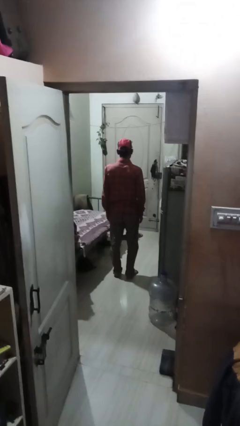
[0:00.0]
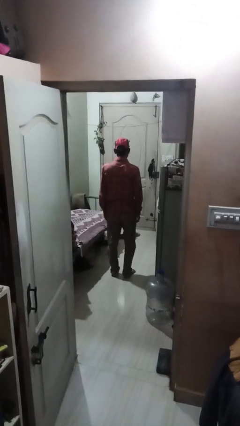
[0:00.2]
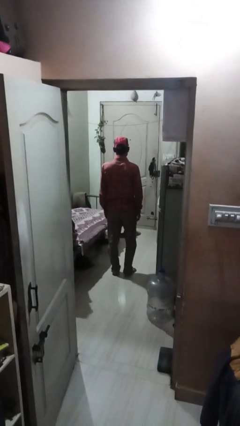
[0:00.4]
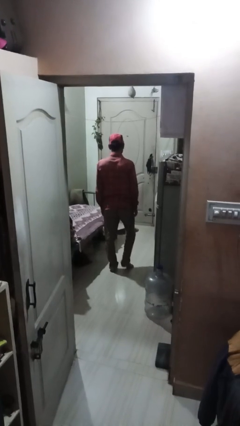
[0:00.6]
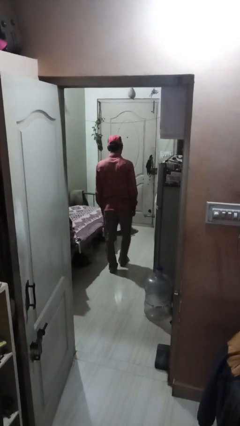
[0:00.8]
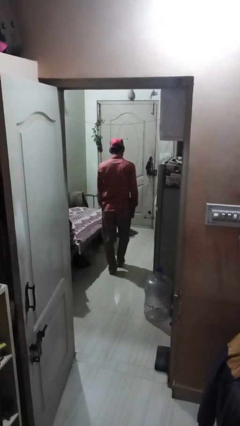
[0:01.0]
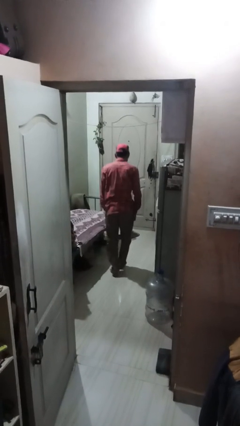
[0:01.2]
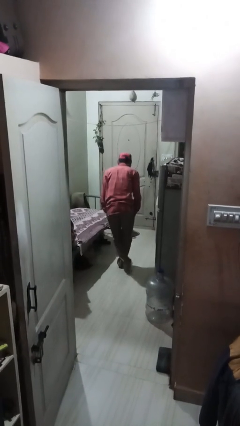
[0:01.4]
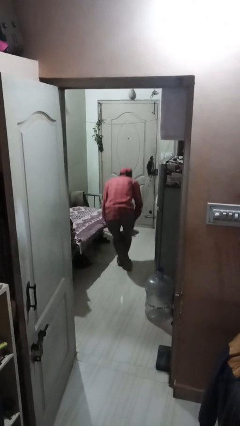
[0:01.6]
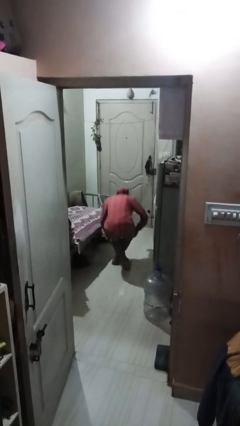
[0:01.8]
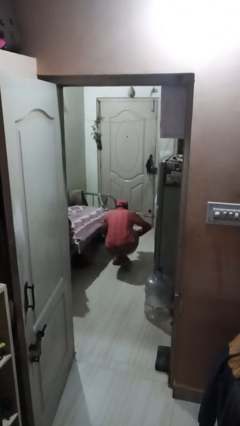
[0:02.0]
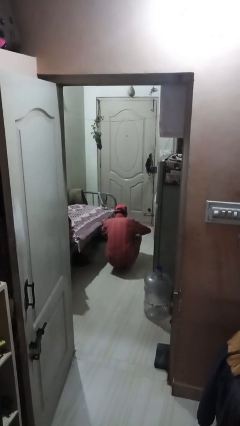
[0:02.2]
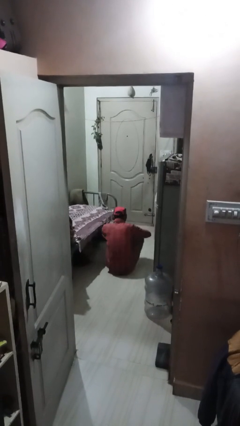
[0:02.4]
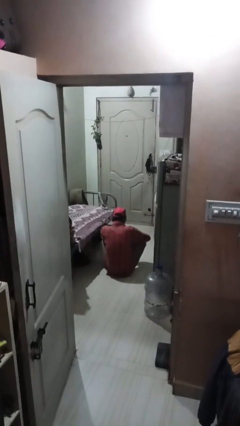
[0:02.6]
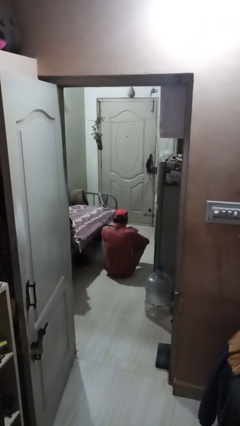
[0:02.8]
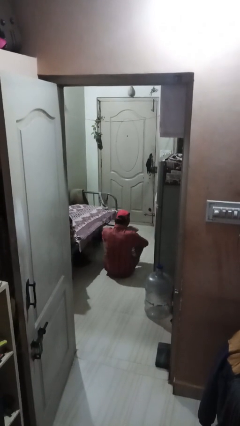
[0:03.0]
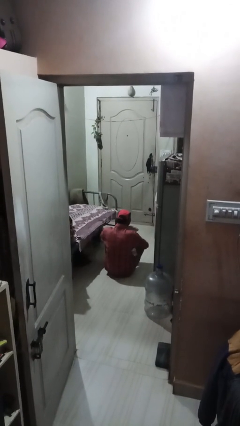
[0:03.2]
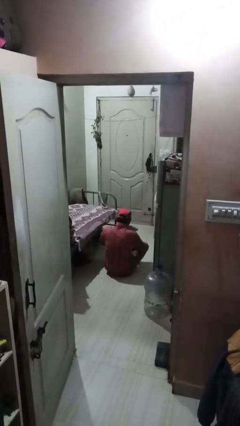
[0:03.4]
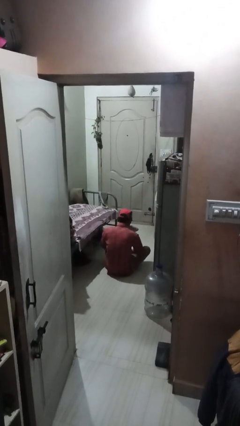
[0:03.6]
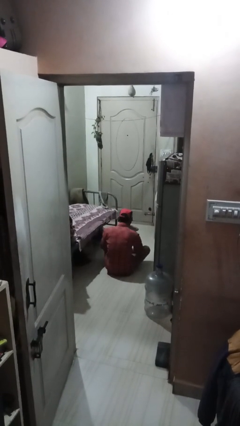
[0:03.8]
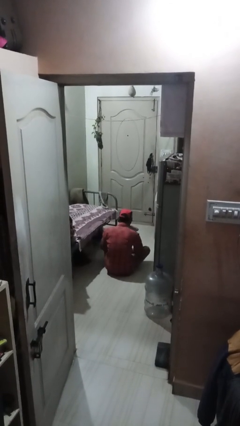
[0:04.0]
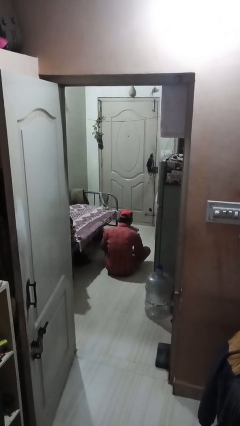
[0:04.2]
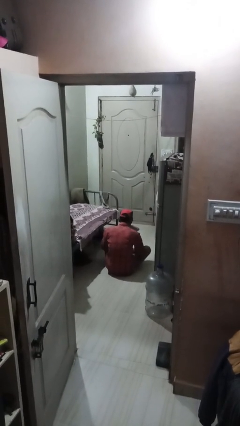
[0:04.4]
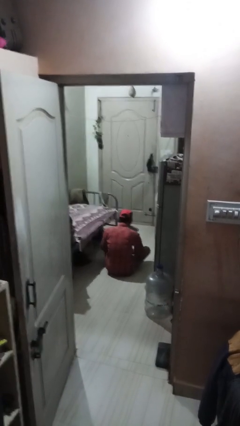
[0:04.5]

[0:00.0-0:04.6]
person sits crisscross

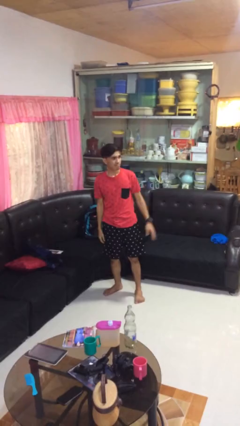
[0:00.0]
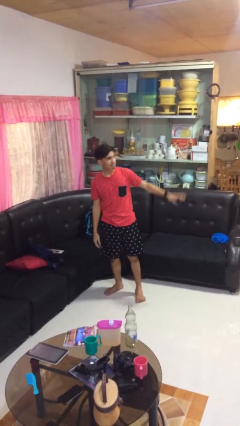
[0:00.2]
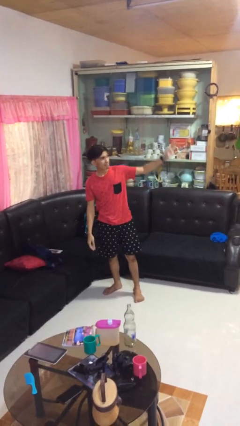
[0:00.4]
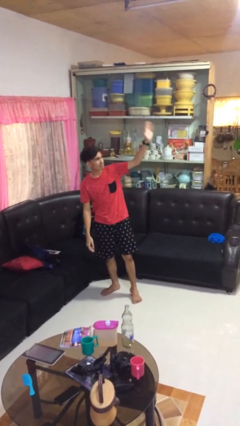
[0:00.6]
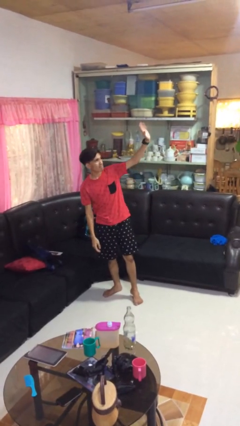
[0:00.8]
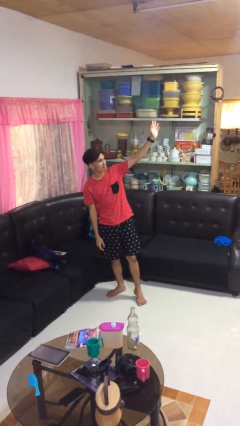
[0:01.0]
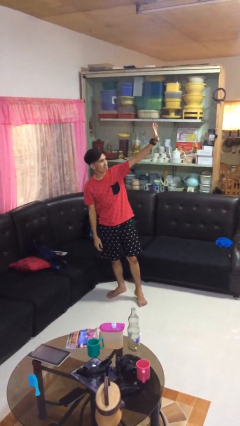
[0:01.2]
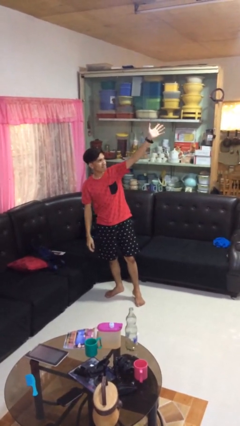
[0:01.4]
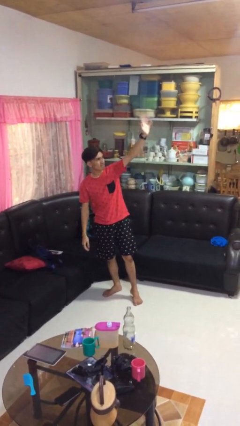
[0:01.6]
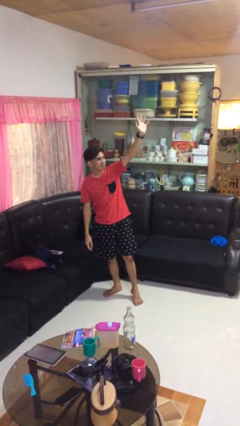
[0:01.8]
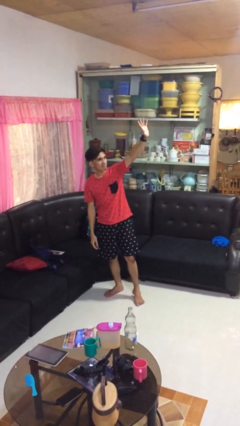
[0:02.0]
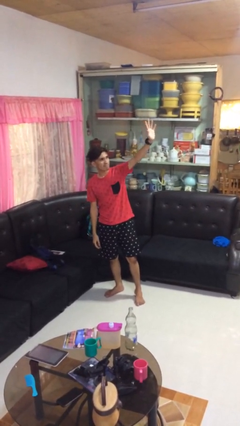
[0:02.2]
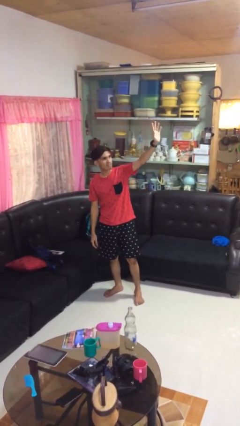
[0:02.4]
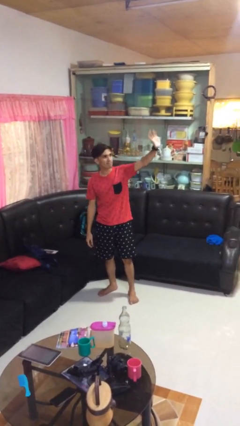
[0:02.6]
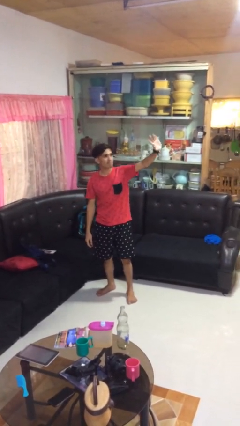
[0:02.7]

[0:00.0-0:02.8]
person waves at person

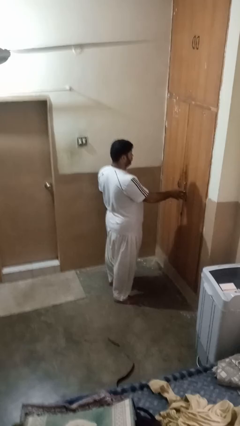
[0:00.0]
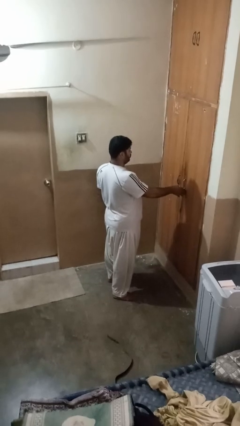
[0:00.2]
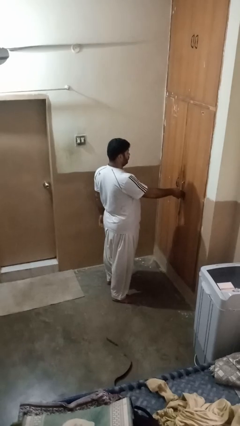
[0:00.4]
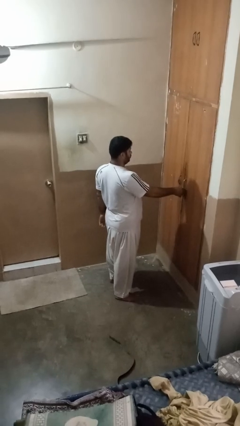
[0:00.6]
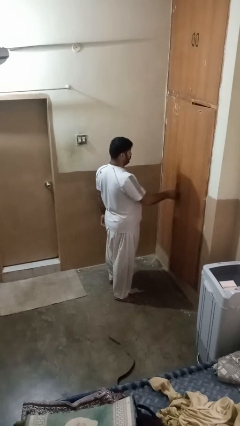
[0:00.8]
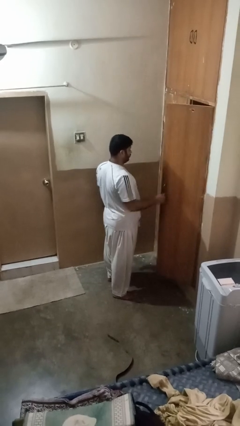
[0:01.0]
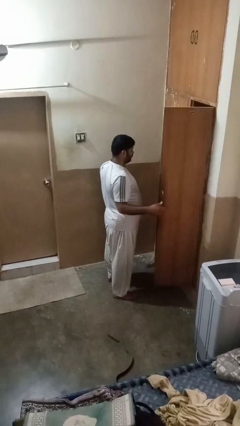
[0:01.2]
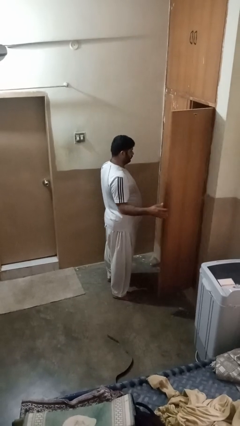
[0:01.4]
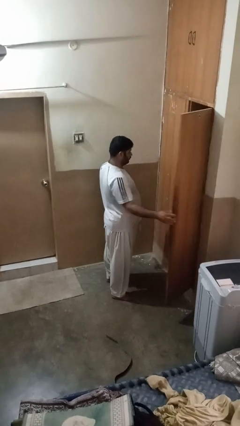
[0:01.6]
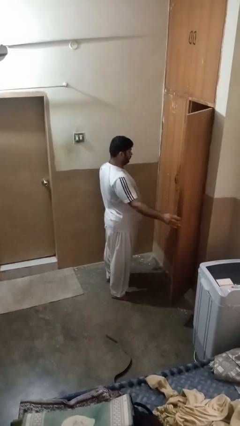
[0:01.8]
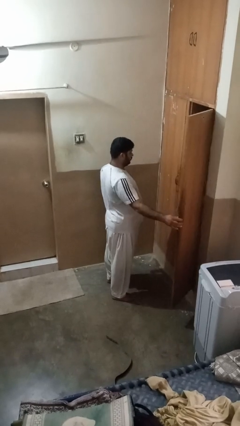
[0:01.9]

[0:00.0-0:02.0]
person opens closet door

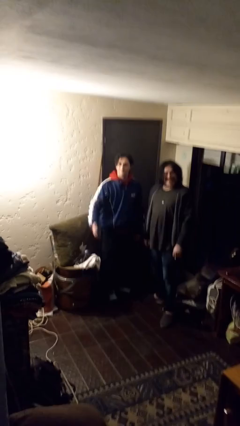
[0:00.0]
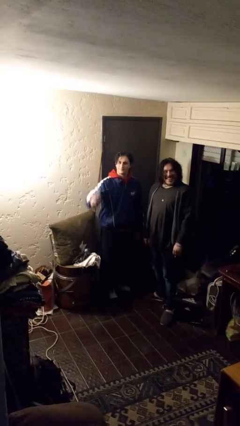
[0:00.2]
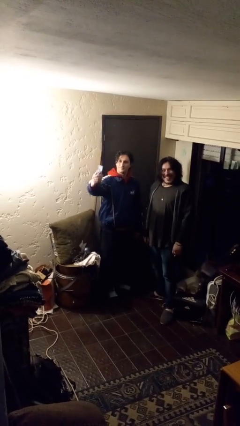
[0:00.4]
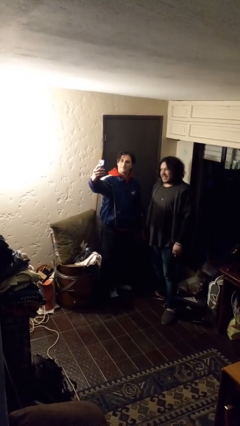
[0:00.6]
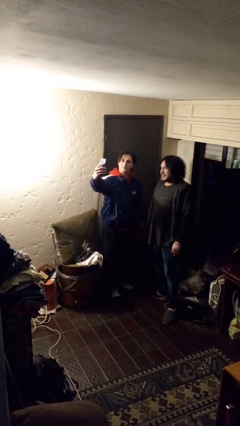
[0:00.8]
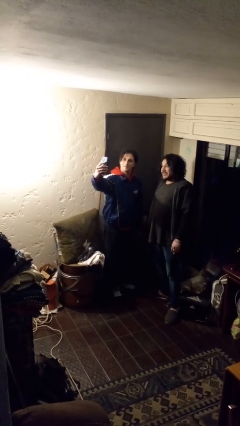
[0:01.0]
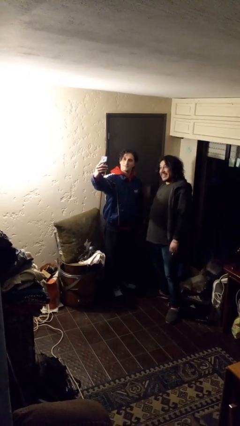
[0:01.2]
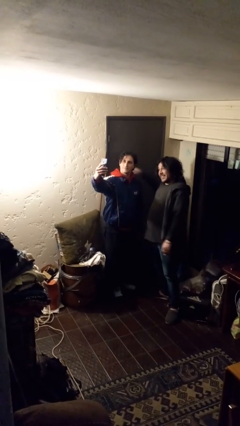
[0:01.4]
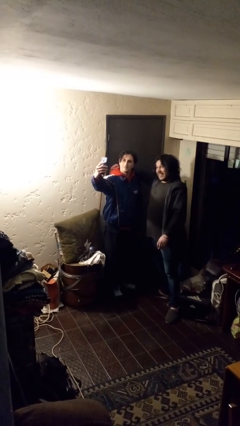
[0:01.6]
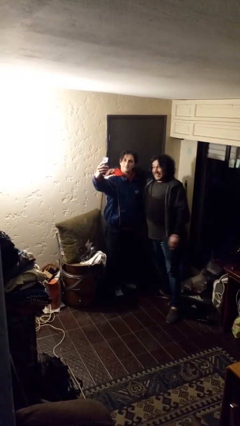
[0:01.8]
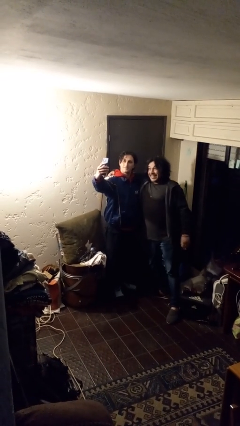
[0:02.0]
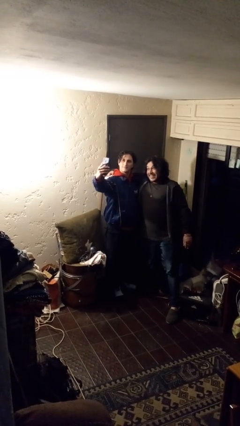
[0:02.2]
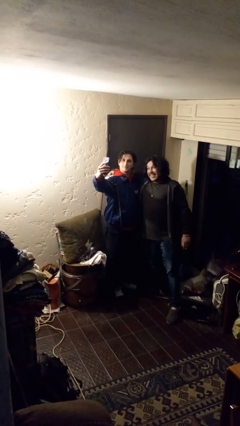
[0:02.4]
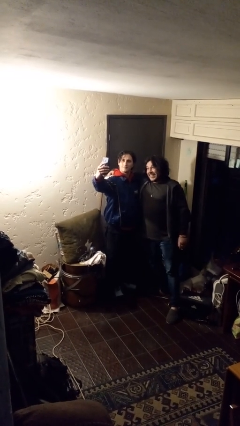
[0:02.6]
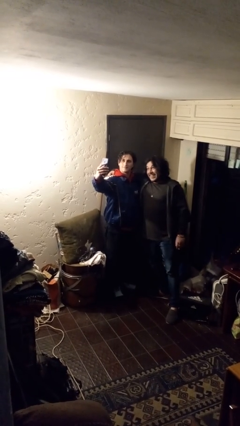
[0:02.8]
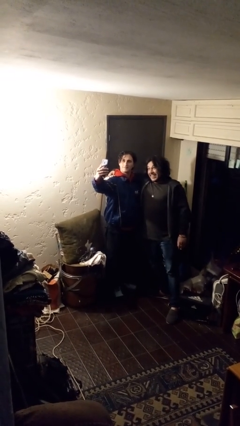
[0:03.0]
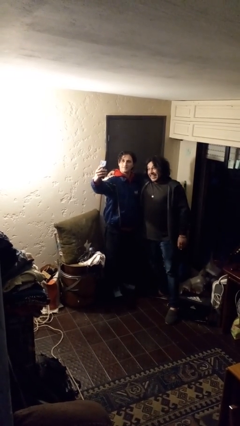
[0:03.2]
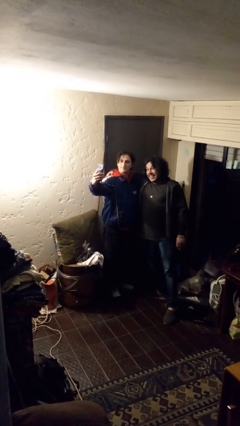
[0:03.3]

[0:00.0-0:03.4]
person takes selfie with person

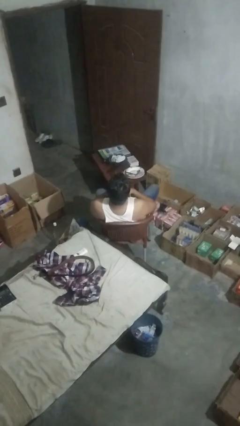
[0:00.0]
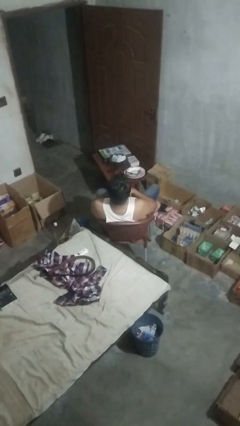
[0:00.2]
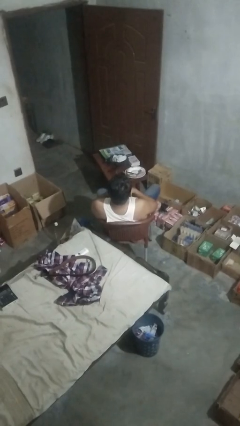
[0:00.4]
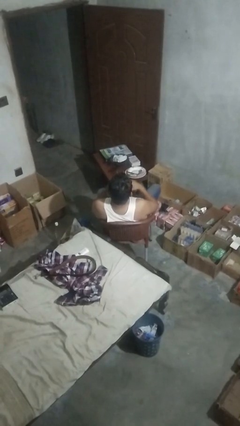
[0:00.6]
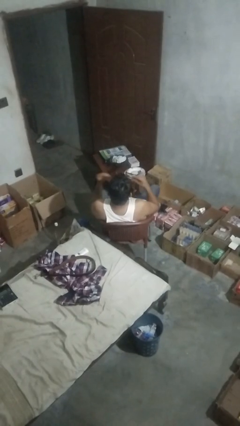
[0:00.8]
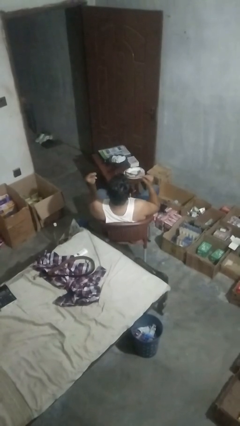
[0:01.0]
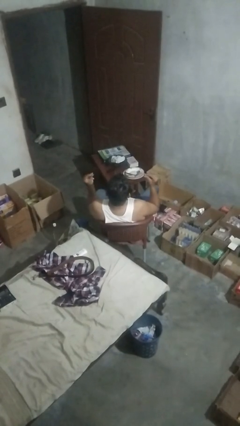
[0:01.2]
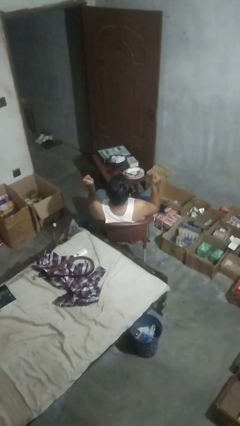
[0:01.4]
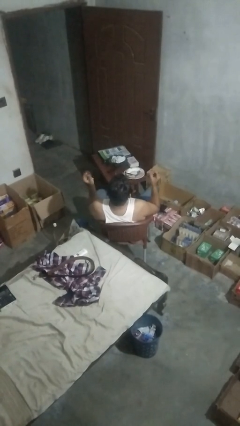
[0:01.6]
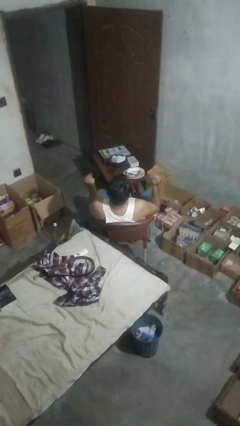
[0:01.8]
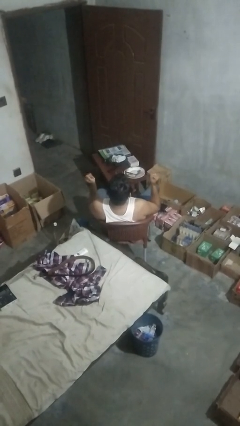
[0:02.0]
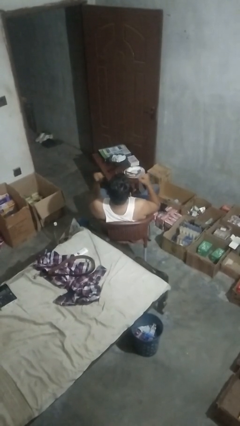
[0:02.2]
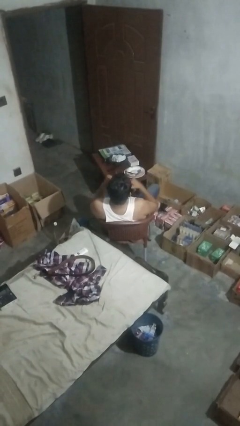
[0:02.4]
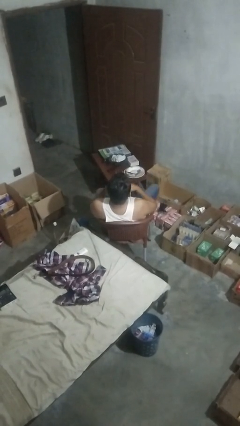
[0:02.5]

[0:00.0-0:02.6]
person snaps fingers

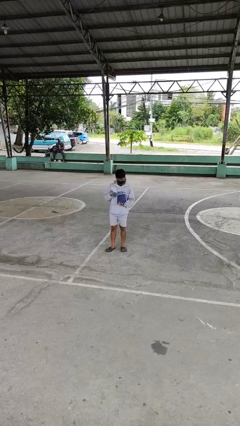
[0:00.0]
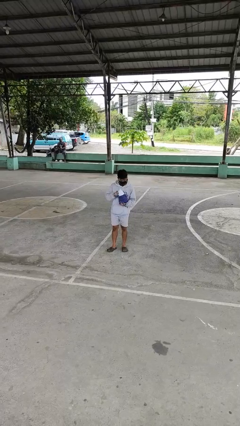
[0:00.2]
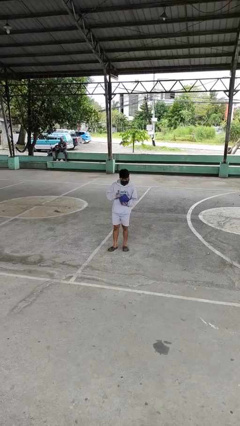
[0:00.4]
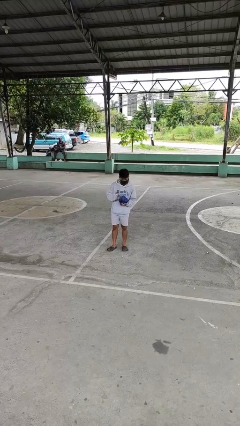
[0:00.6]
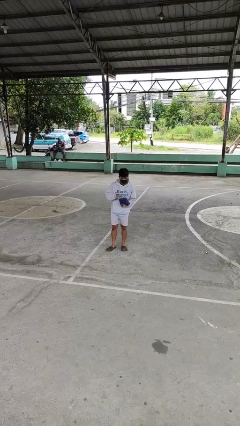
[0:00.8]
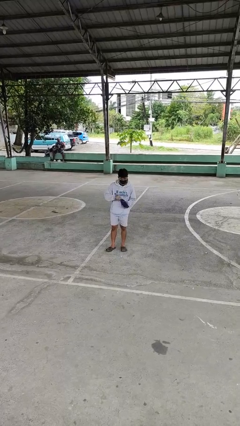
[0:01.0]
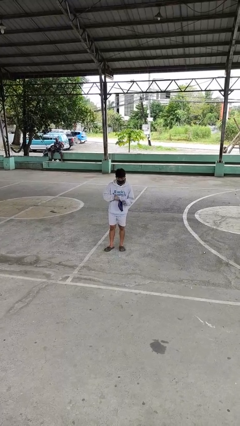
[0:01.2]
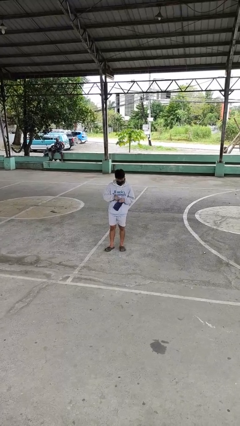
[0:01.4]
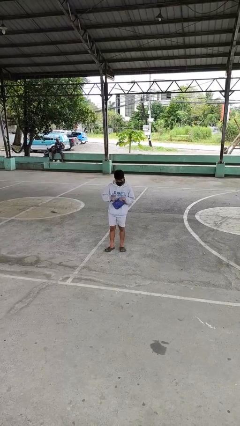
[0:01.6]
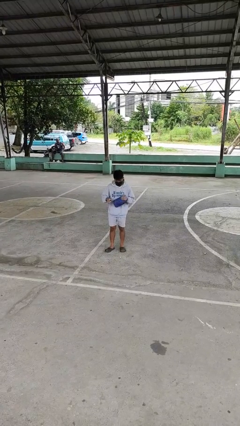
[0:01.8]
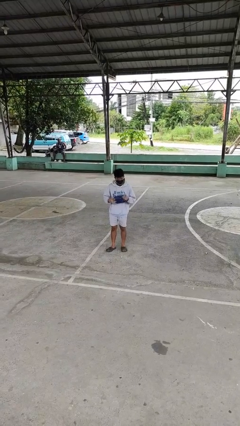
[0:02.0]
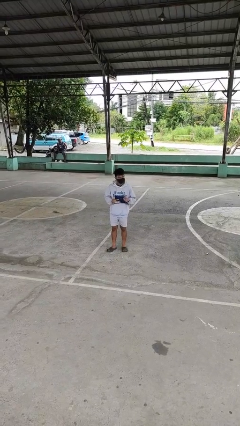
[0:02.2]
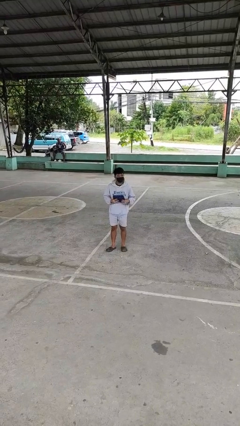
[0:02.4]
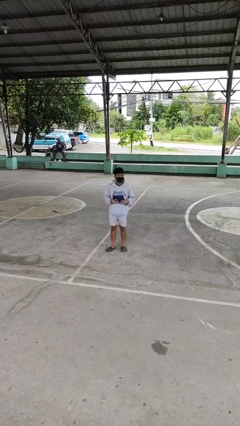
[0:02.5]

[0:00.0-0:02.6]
person puts object into purse
